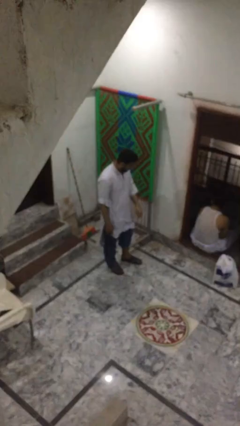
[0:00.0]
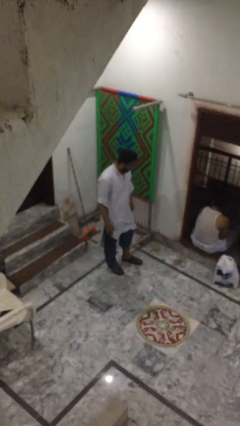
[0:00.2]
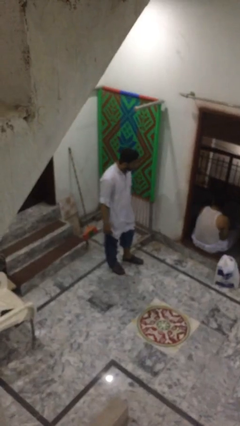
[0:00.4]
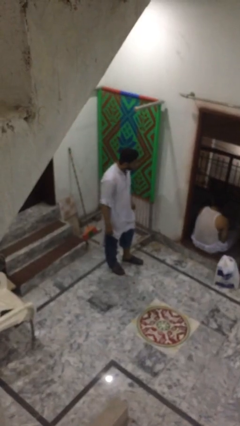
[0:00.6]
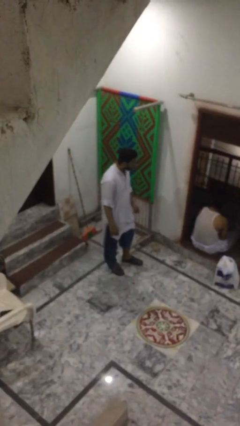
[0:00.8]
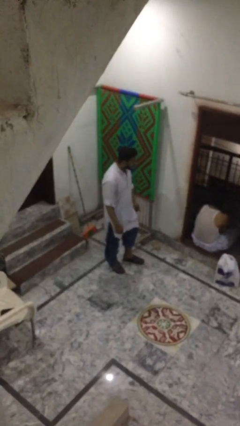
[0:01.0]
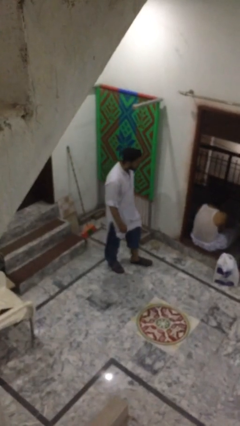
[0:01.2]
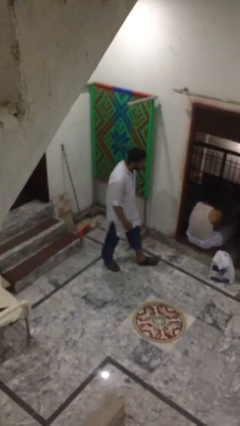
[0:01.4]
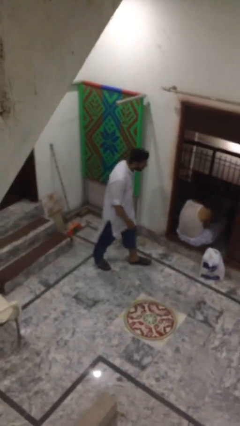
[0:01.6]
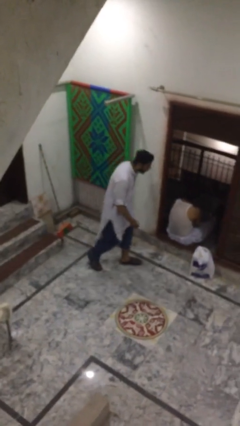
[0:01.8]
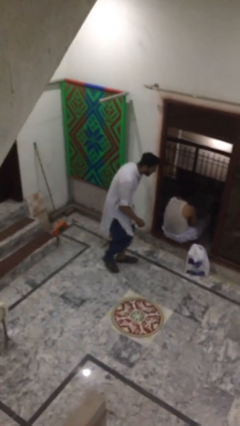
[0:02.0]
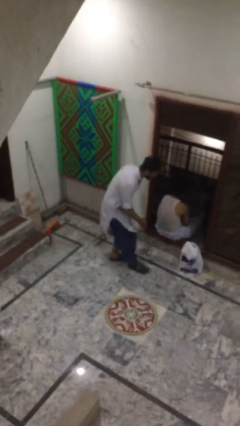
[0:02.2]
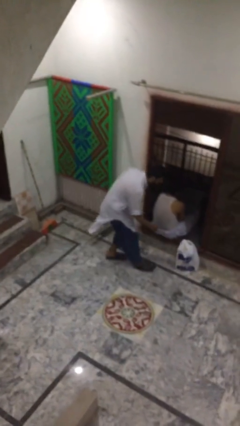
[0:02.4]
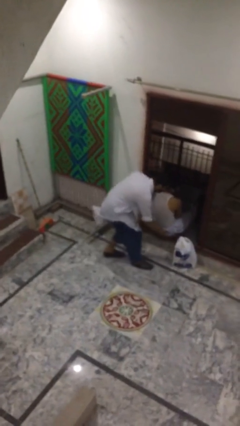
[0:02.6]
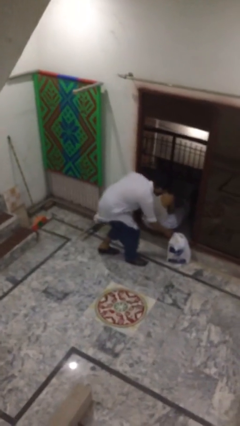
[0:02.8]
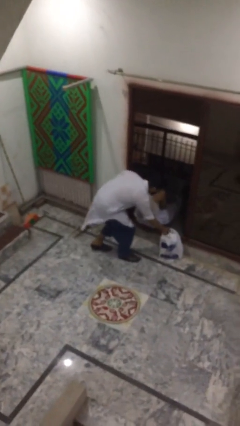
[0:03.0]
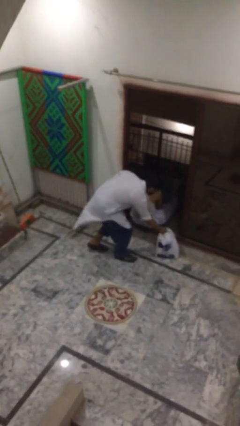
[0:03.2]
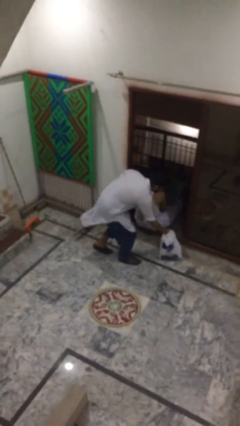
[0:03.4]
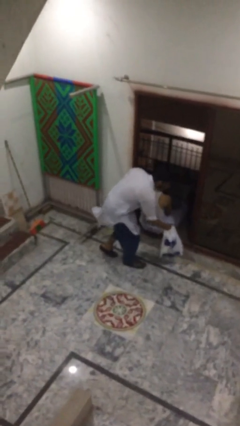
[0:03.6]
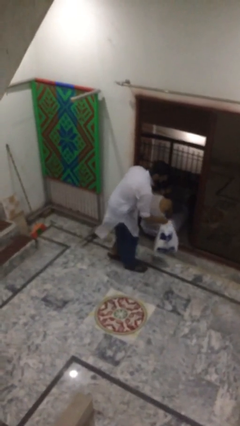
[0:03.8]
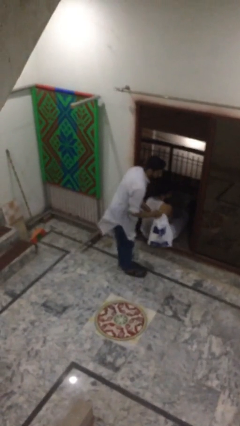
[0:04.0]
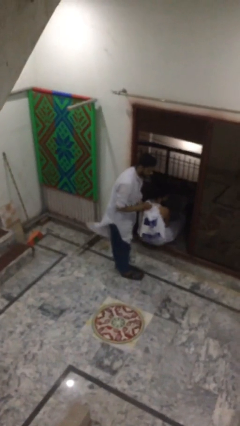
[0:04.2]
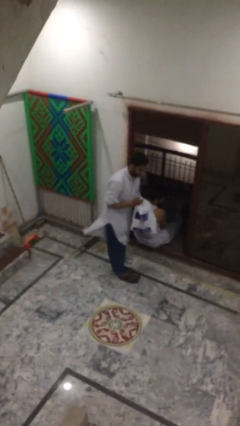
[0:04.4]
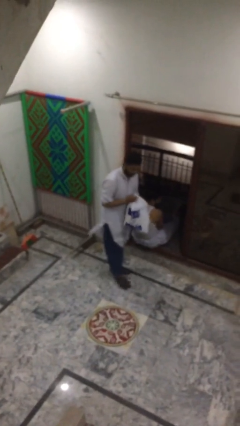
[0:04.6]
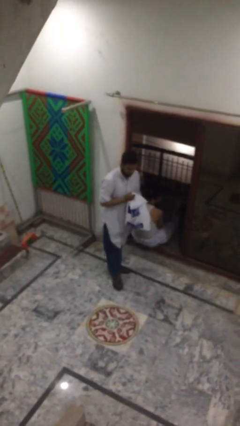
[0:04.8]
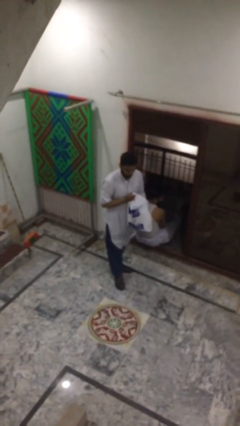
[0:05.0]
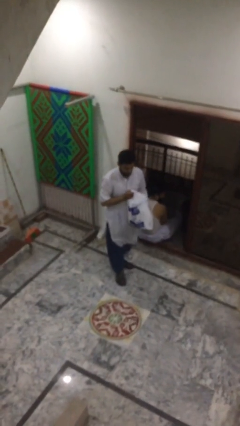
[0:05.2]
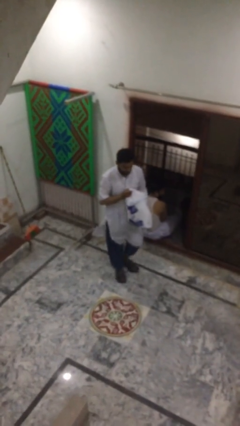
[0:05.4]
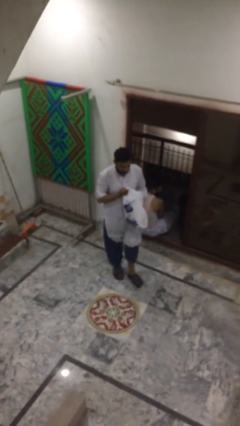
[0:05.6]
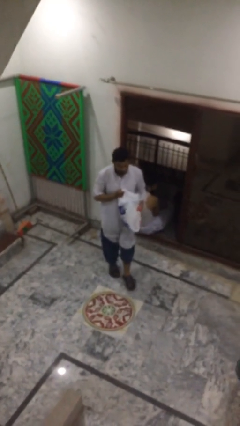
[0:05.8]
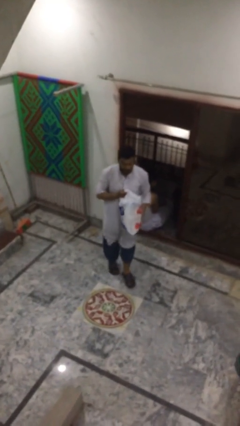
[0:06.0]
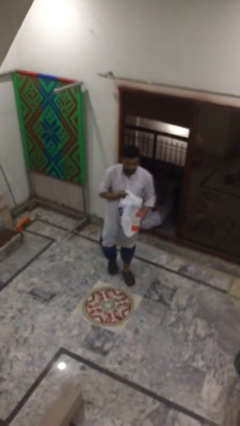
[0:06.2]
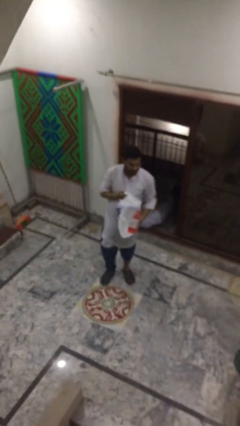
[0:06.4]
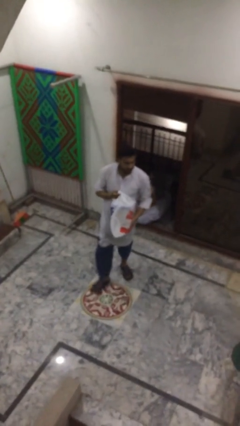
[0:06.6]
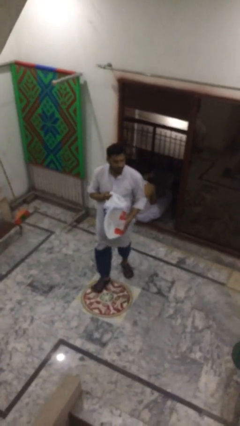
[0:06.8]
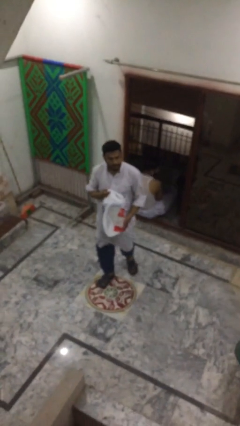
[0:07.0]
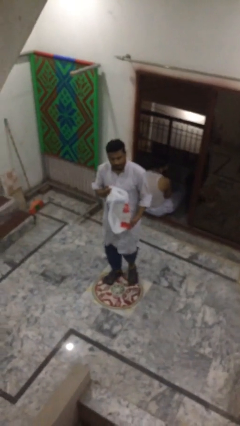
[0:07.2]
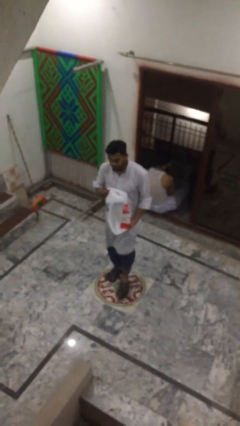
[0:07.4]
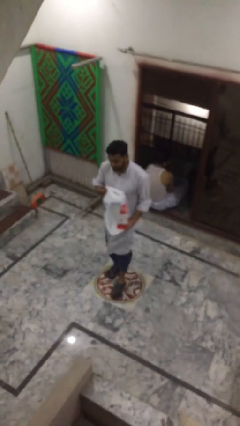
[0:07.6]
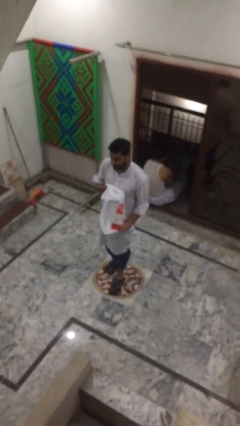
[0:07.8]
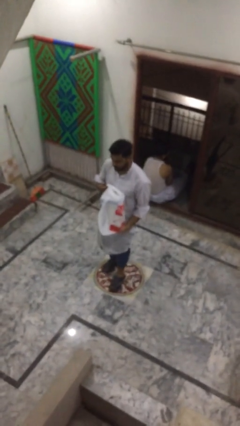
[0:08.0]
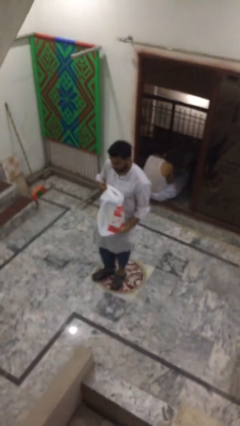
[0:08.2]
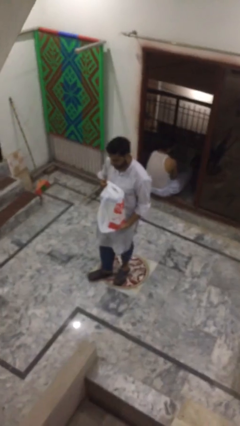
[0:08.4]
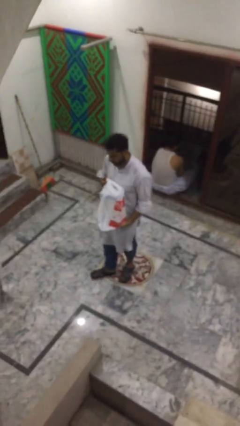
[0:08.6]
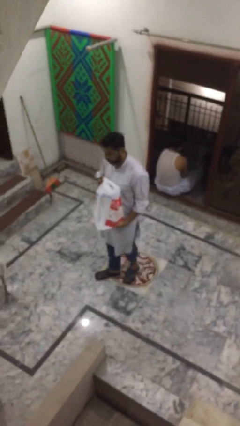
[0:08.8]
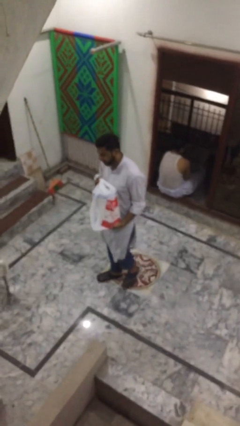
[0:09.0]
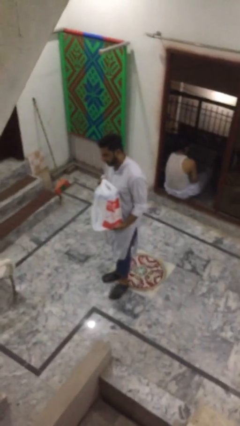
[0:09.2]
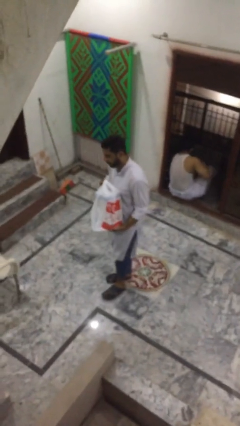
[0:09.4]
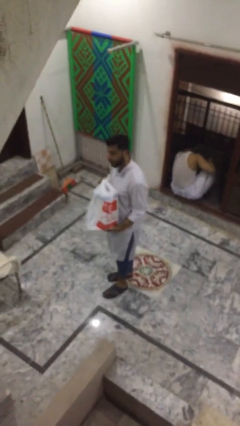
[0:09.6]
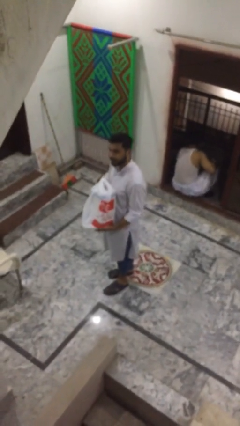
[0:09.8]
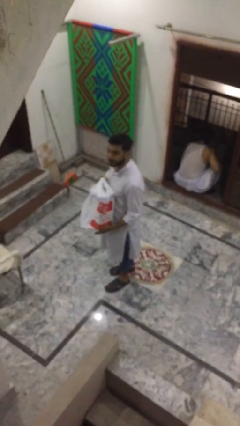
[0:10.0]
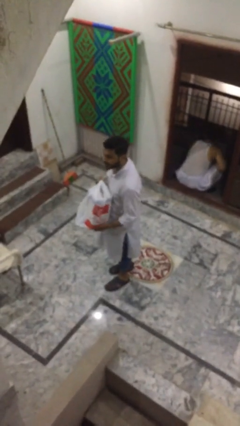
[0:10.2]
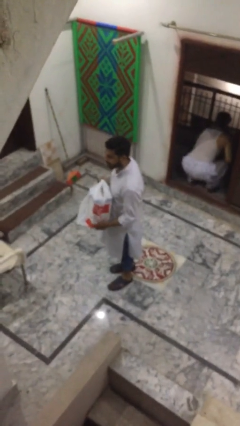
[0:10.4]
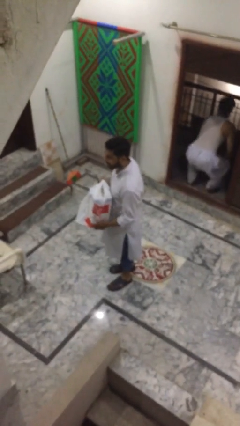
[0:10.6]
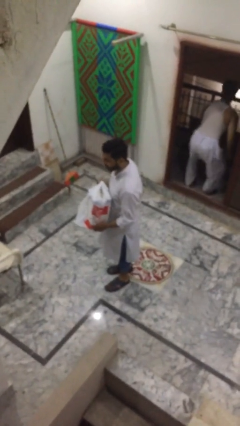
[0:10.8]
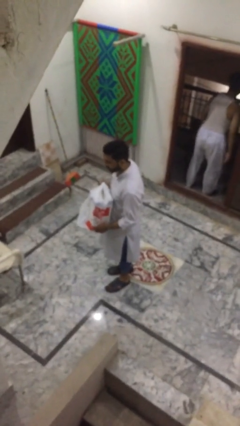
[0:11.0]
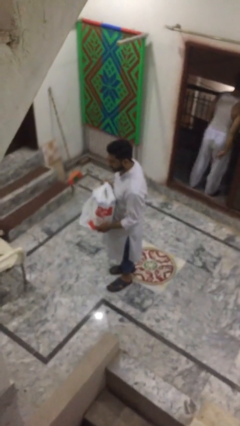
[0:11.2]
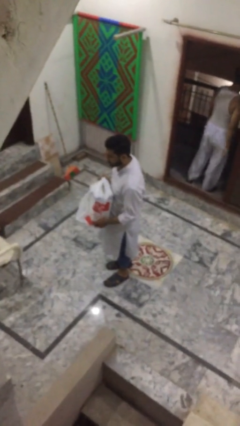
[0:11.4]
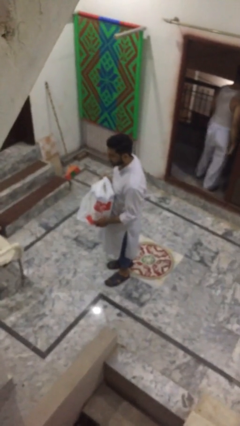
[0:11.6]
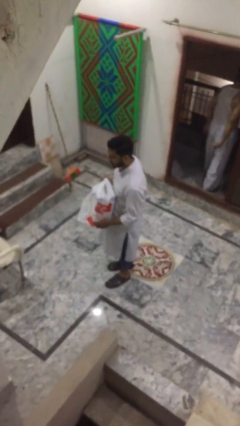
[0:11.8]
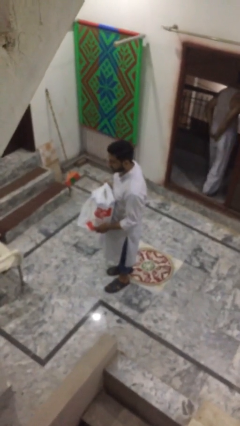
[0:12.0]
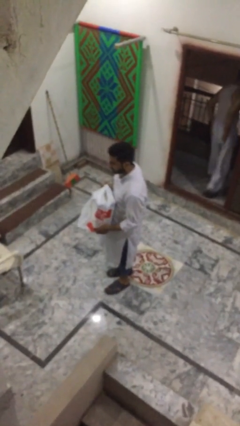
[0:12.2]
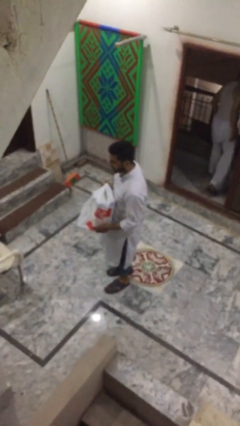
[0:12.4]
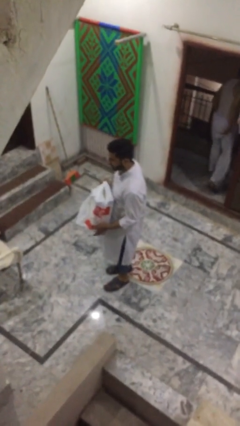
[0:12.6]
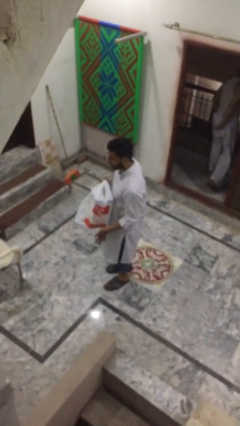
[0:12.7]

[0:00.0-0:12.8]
person steals object from person

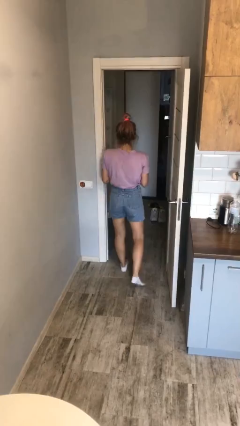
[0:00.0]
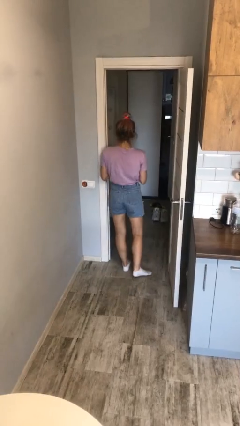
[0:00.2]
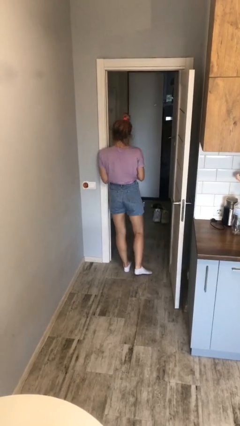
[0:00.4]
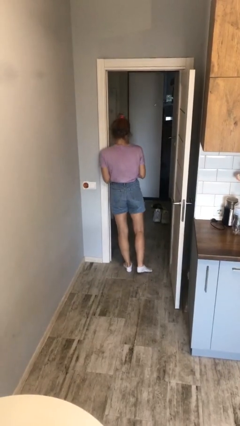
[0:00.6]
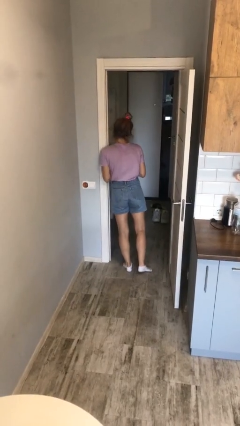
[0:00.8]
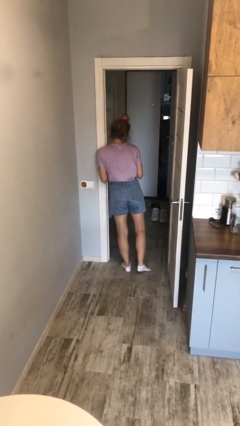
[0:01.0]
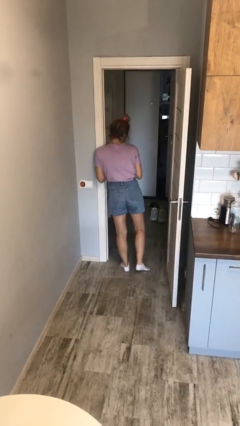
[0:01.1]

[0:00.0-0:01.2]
person bumps into wall

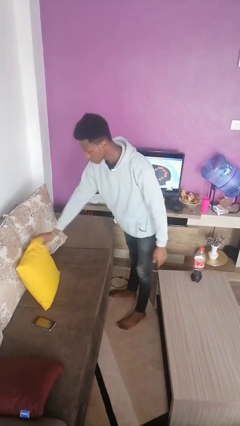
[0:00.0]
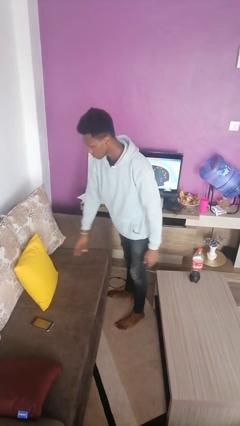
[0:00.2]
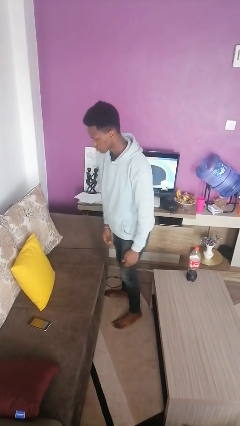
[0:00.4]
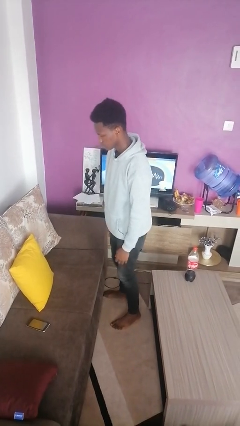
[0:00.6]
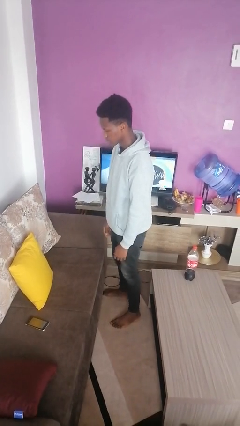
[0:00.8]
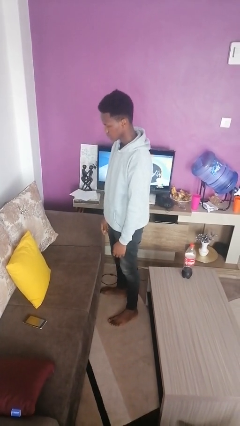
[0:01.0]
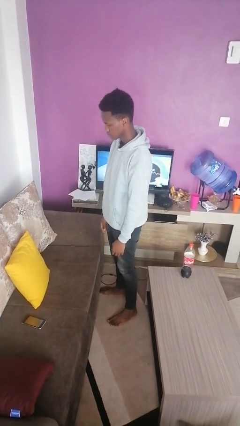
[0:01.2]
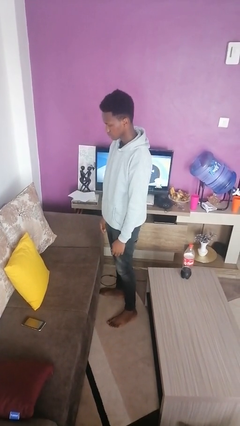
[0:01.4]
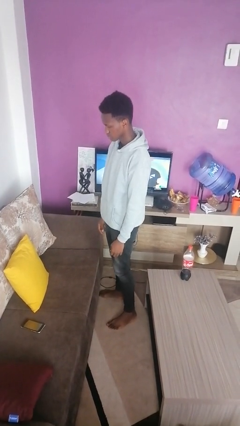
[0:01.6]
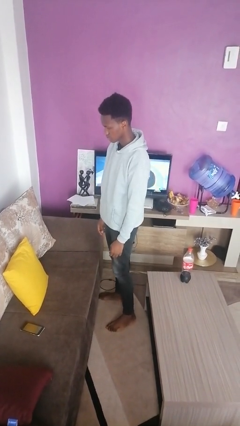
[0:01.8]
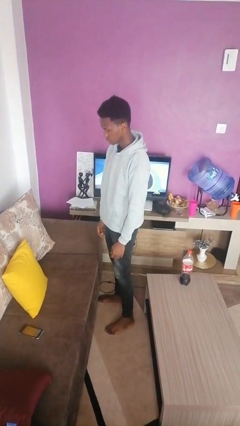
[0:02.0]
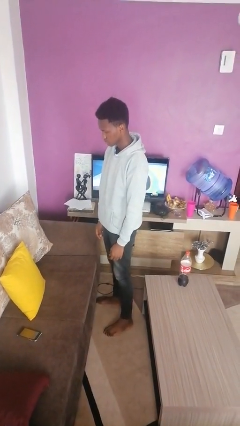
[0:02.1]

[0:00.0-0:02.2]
person puts down object on couch

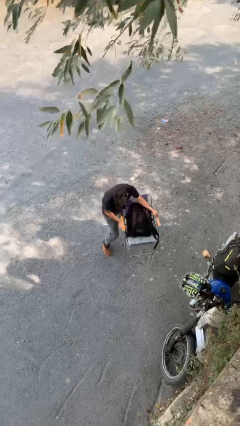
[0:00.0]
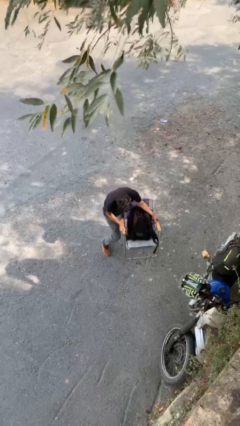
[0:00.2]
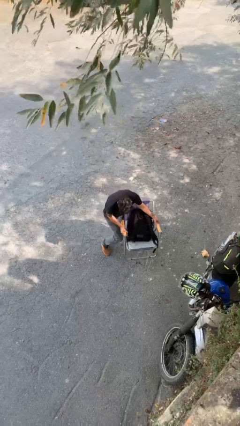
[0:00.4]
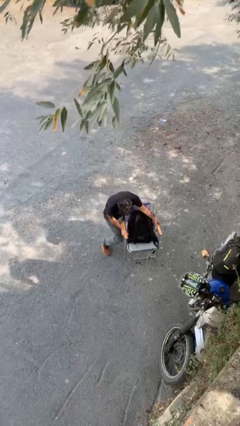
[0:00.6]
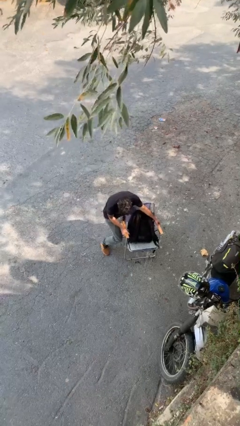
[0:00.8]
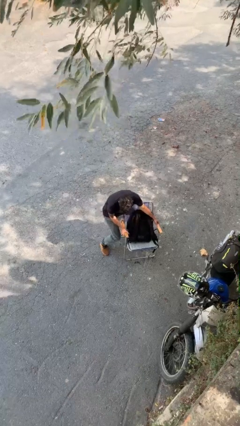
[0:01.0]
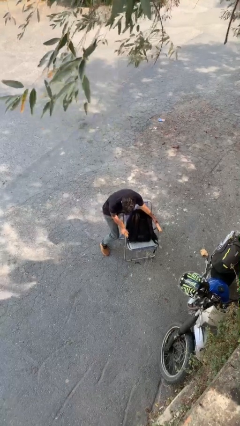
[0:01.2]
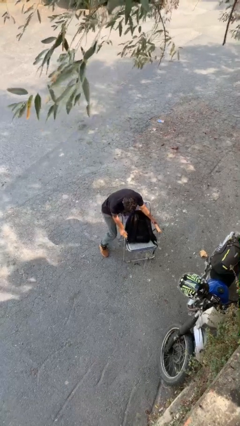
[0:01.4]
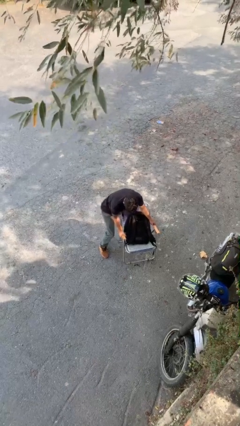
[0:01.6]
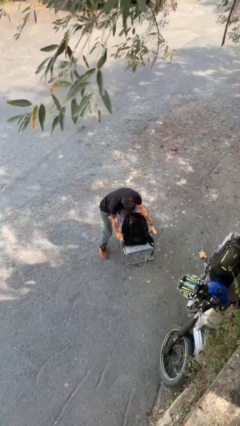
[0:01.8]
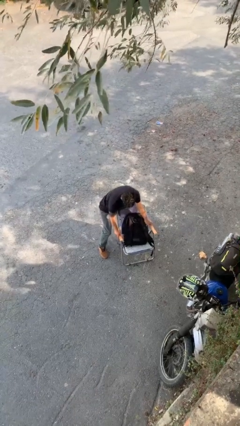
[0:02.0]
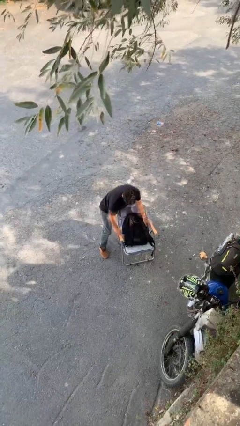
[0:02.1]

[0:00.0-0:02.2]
person puts down object on floor
